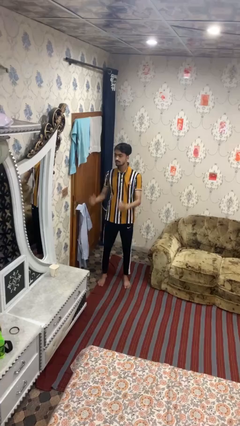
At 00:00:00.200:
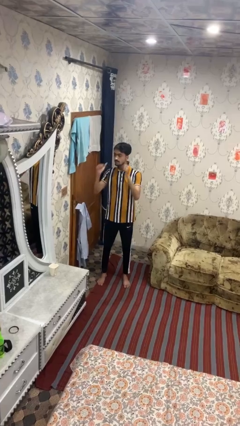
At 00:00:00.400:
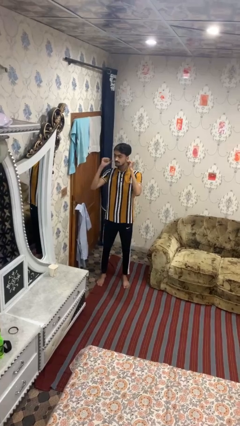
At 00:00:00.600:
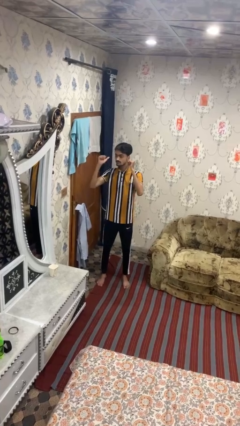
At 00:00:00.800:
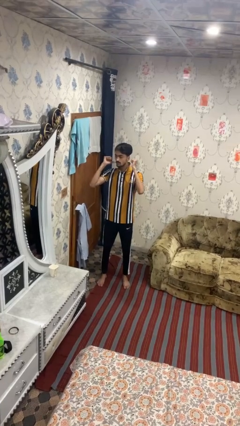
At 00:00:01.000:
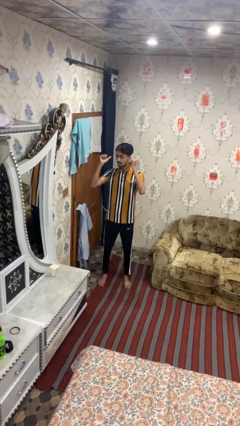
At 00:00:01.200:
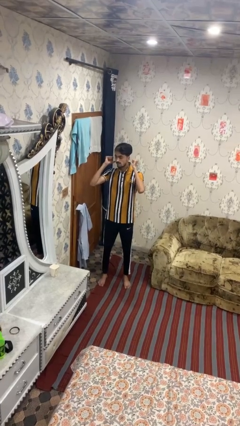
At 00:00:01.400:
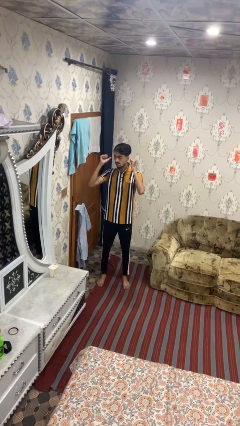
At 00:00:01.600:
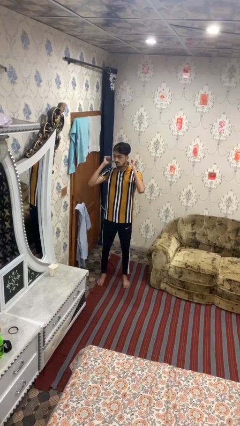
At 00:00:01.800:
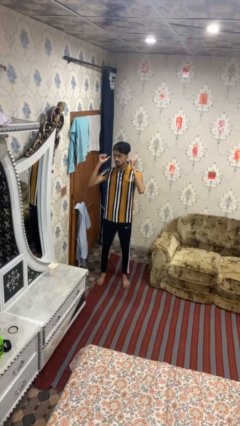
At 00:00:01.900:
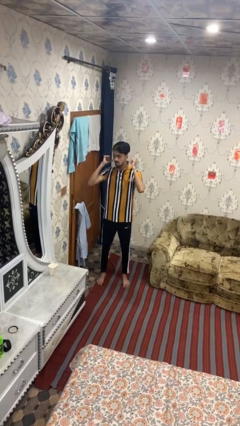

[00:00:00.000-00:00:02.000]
person gestures behind me

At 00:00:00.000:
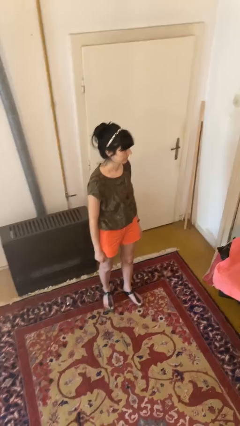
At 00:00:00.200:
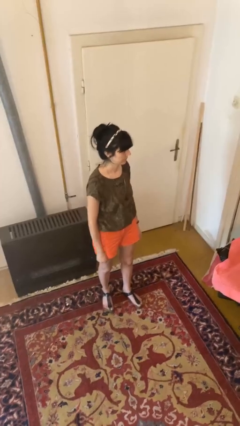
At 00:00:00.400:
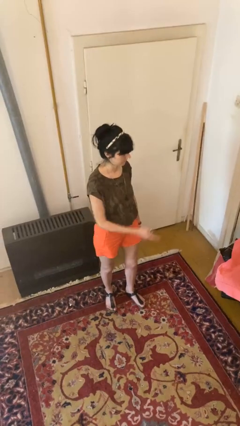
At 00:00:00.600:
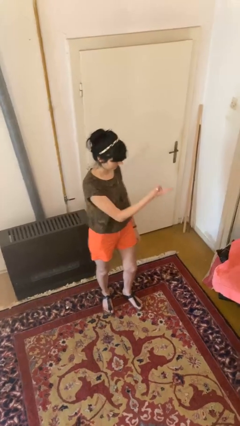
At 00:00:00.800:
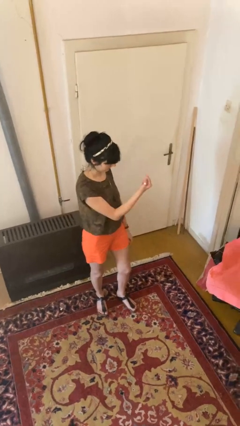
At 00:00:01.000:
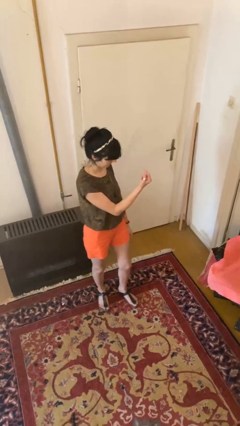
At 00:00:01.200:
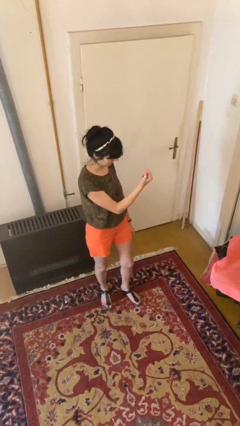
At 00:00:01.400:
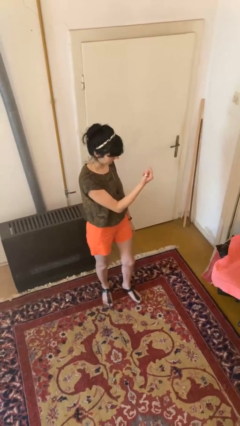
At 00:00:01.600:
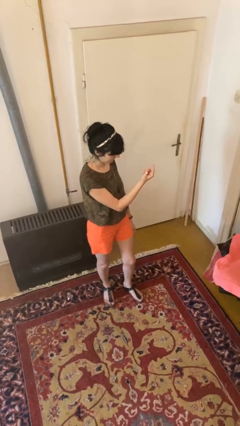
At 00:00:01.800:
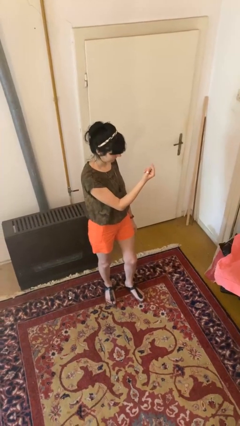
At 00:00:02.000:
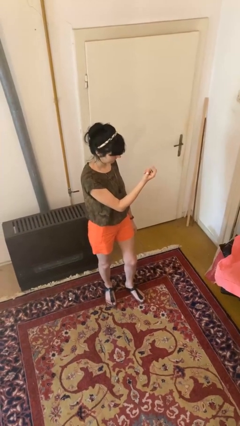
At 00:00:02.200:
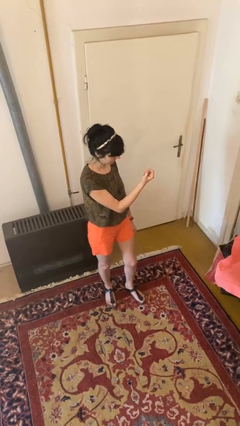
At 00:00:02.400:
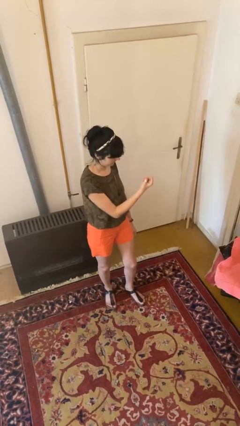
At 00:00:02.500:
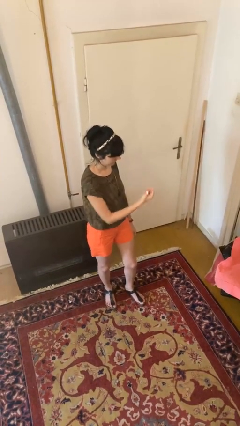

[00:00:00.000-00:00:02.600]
person gestures come here

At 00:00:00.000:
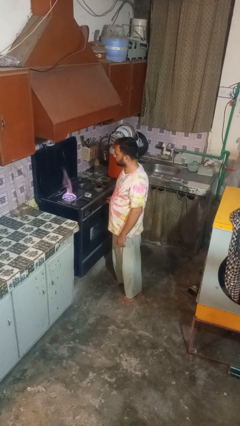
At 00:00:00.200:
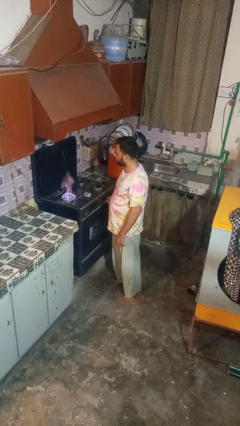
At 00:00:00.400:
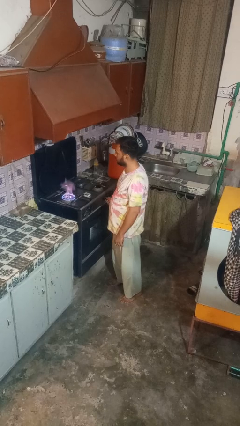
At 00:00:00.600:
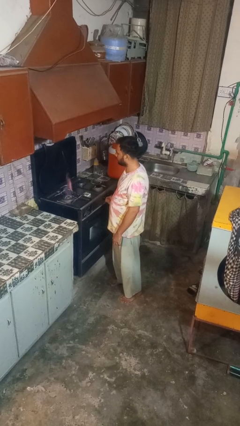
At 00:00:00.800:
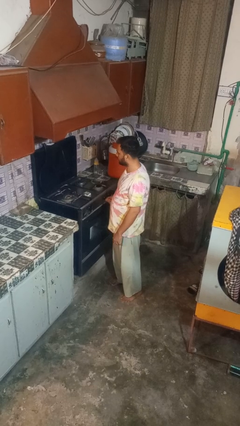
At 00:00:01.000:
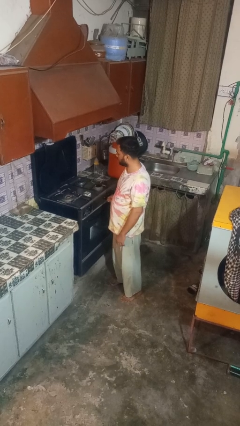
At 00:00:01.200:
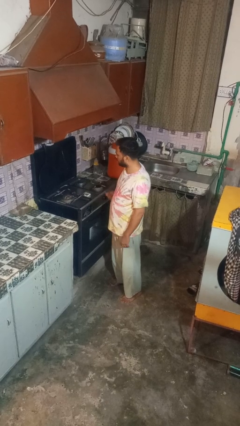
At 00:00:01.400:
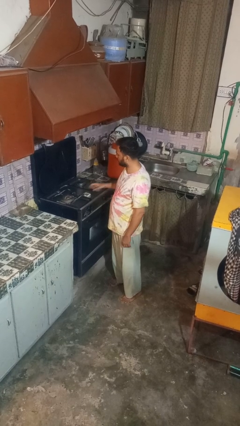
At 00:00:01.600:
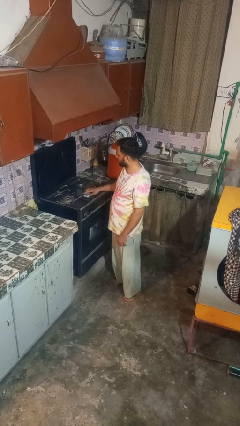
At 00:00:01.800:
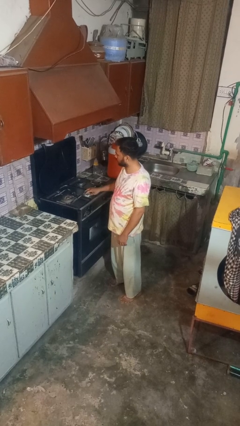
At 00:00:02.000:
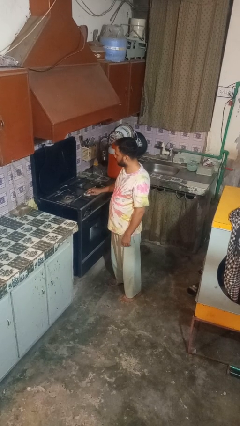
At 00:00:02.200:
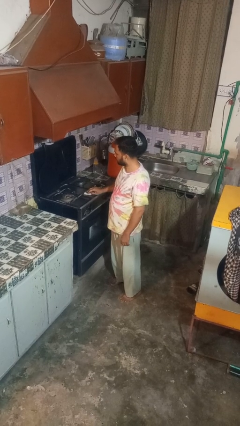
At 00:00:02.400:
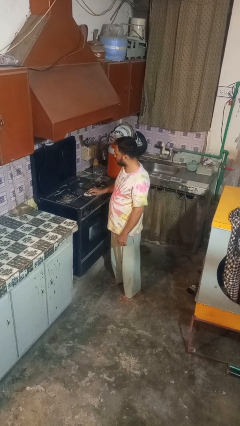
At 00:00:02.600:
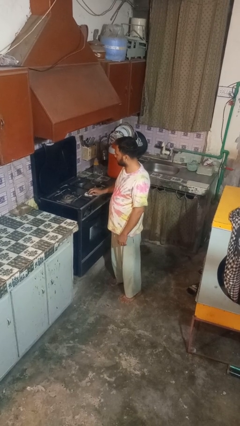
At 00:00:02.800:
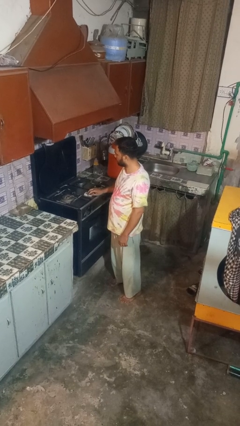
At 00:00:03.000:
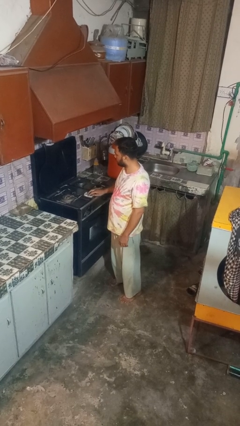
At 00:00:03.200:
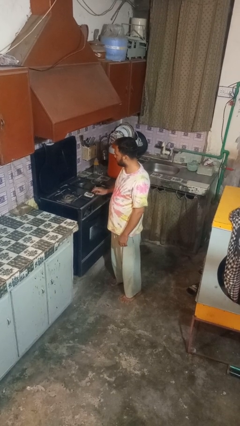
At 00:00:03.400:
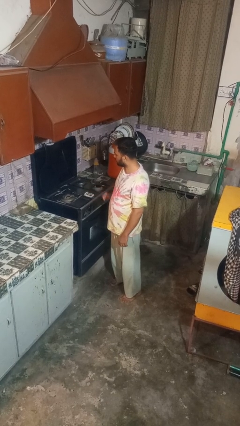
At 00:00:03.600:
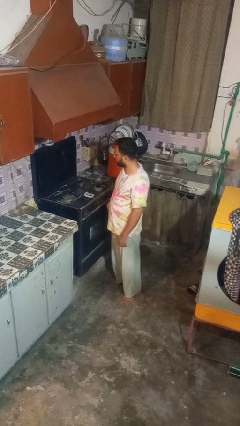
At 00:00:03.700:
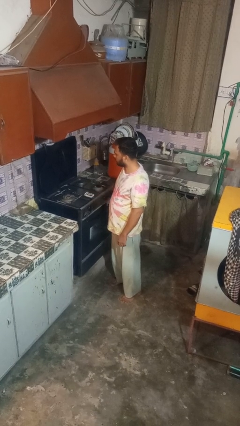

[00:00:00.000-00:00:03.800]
person turns off stovetop

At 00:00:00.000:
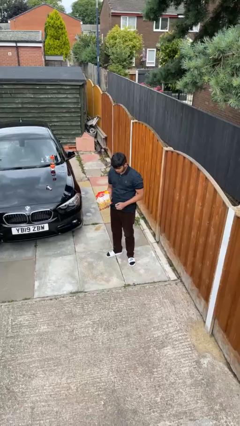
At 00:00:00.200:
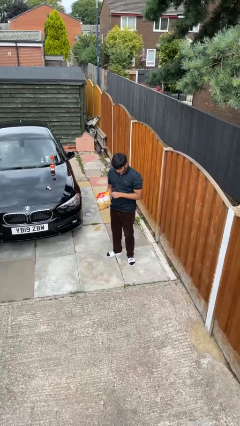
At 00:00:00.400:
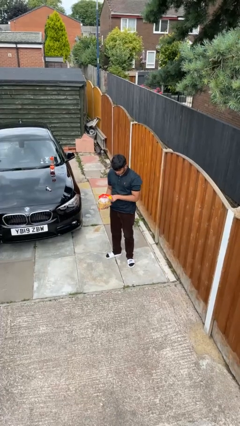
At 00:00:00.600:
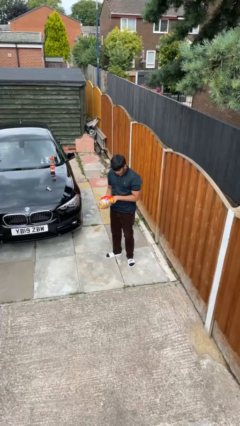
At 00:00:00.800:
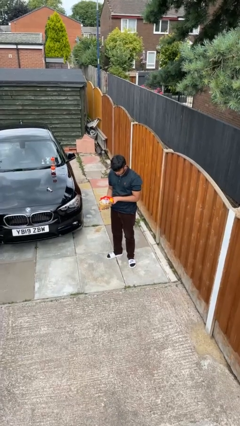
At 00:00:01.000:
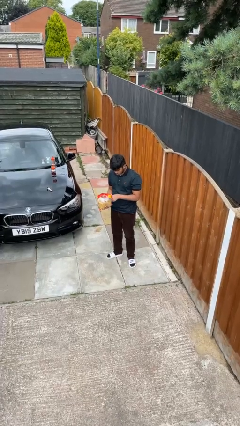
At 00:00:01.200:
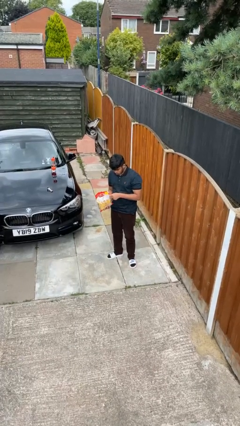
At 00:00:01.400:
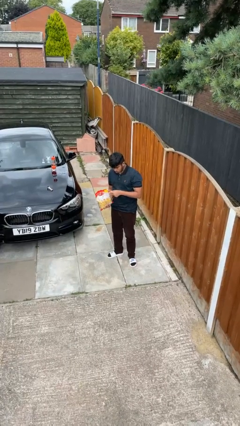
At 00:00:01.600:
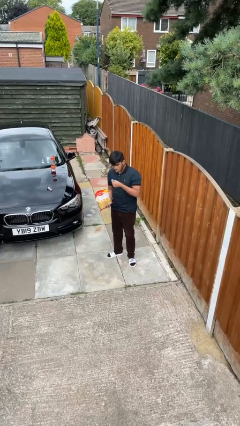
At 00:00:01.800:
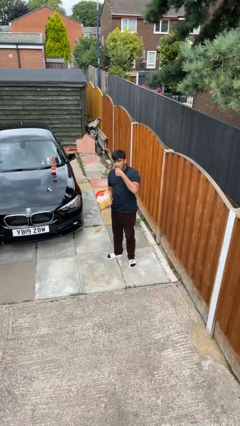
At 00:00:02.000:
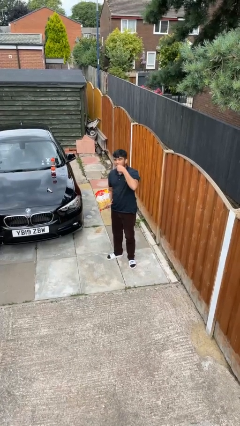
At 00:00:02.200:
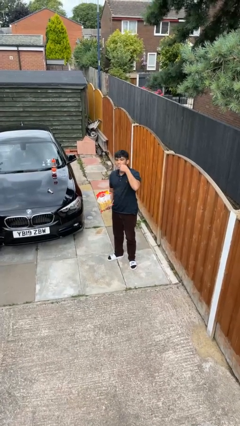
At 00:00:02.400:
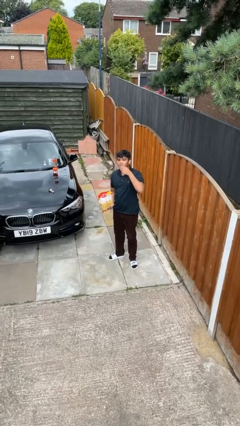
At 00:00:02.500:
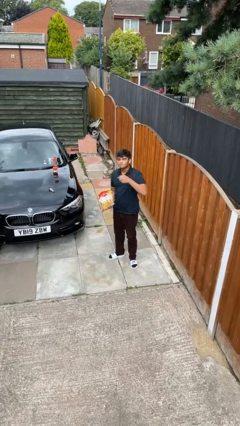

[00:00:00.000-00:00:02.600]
person eats snack from bag

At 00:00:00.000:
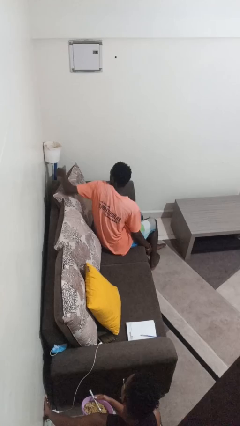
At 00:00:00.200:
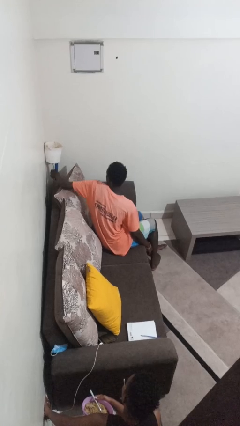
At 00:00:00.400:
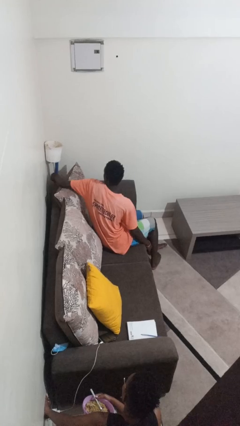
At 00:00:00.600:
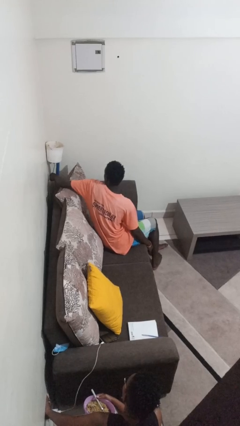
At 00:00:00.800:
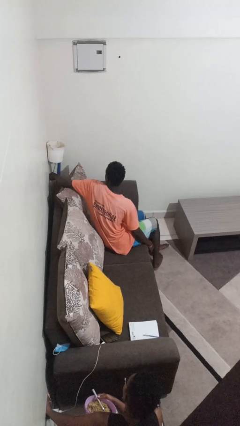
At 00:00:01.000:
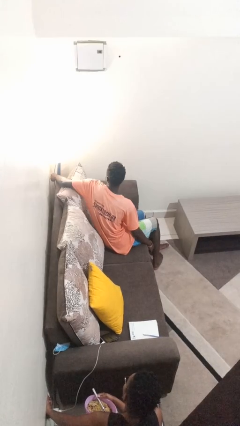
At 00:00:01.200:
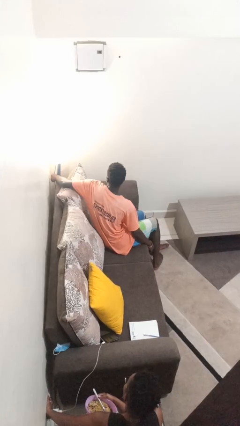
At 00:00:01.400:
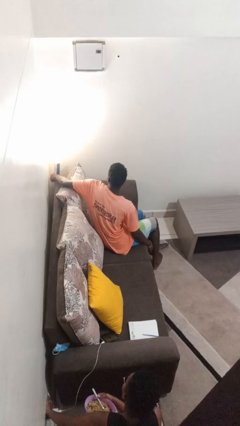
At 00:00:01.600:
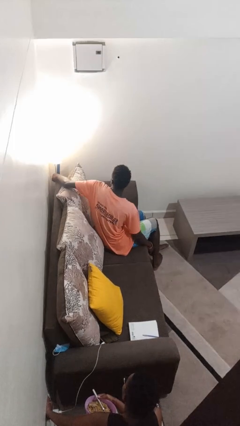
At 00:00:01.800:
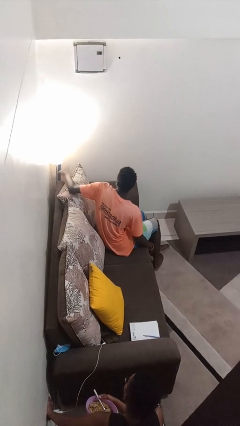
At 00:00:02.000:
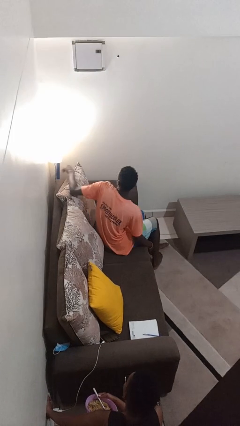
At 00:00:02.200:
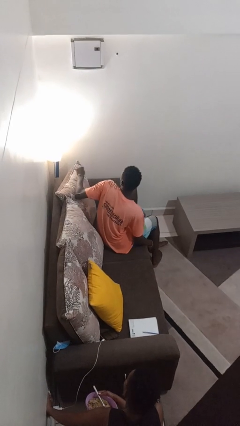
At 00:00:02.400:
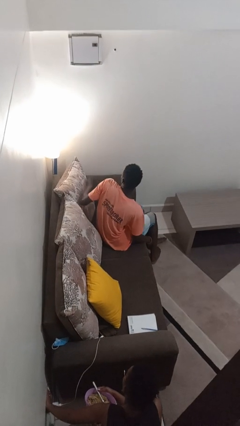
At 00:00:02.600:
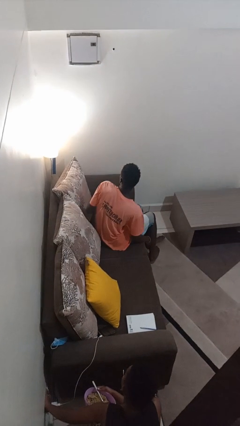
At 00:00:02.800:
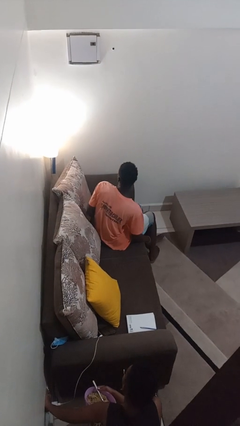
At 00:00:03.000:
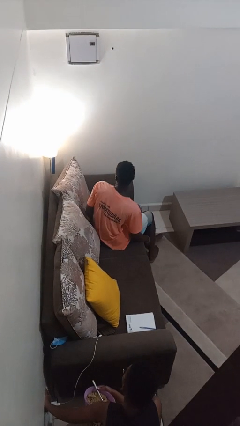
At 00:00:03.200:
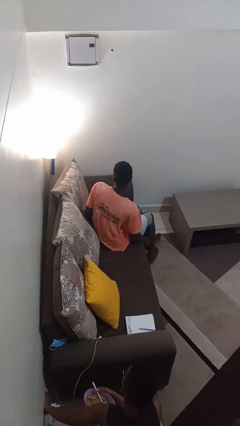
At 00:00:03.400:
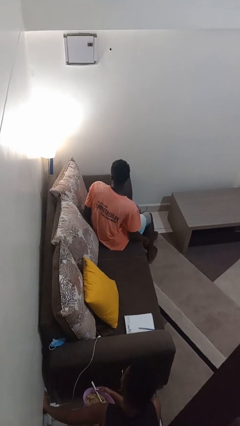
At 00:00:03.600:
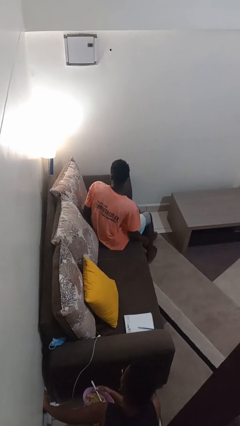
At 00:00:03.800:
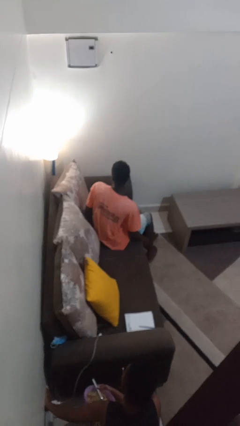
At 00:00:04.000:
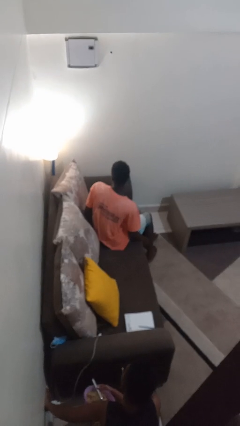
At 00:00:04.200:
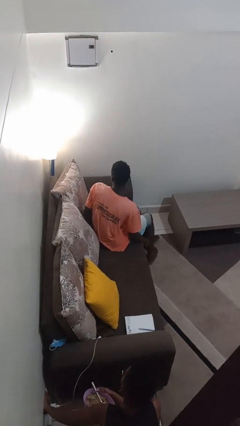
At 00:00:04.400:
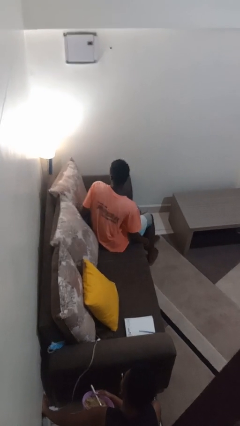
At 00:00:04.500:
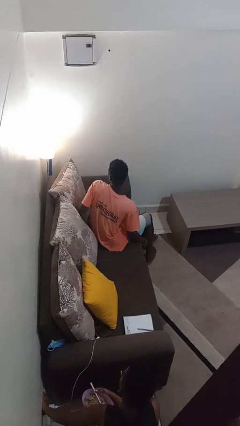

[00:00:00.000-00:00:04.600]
person turns on lamp

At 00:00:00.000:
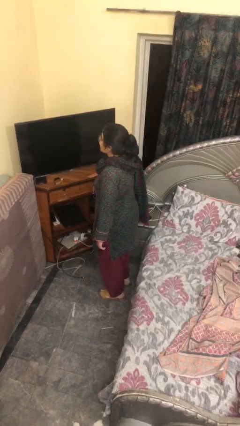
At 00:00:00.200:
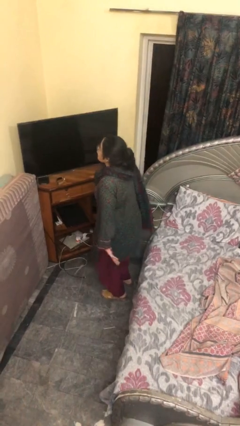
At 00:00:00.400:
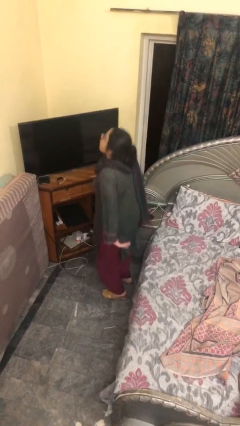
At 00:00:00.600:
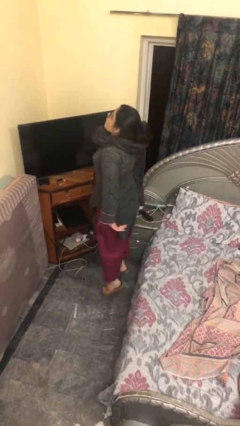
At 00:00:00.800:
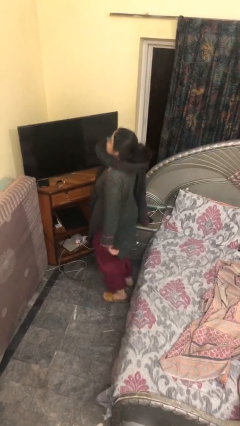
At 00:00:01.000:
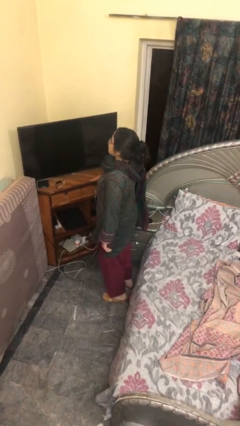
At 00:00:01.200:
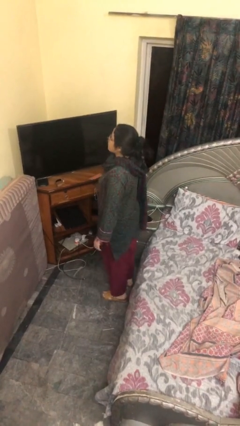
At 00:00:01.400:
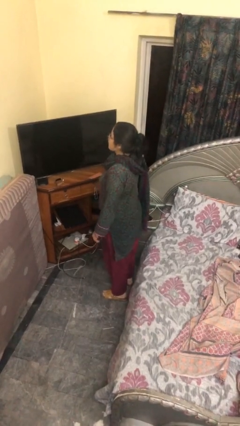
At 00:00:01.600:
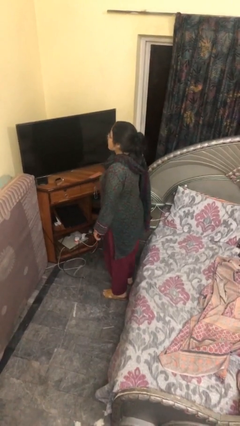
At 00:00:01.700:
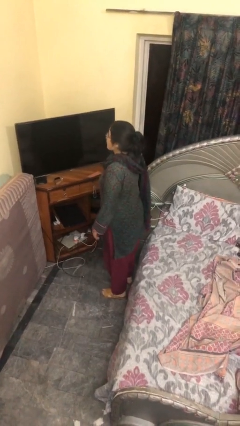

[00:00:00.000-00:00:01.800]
person jumps
